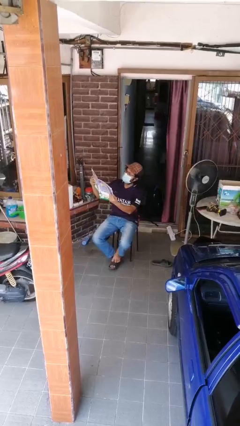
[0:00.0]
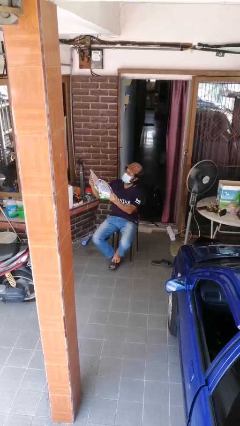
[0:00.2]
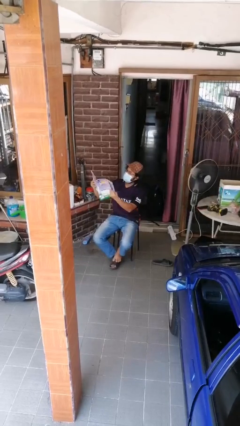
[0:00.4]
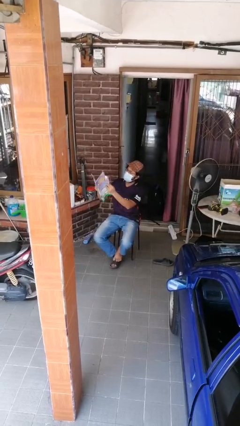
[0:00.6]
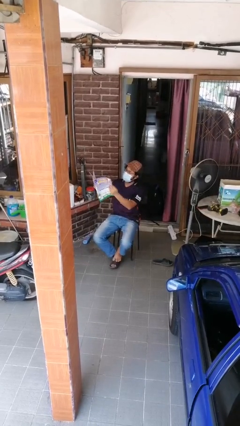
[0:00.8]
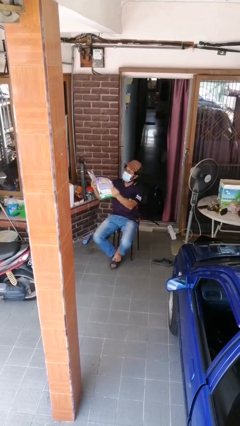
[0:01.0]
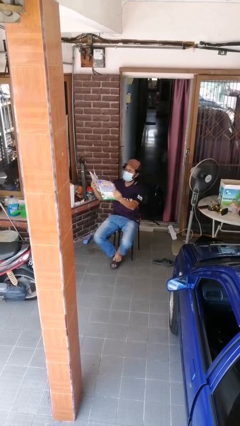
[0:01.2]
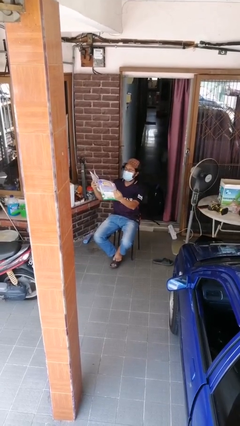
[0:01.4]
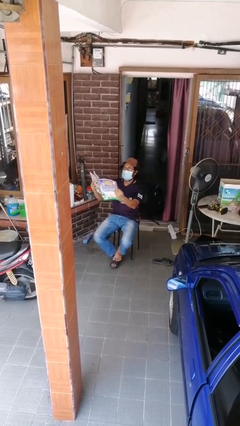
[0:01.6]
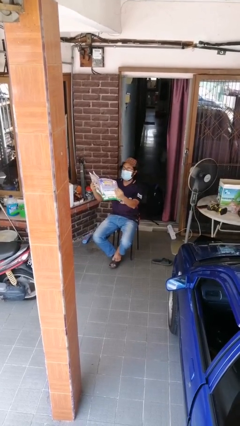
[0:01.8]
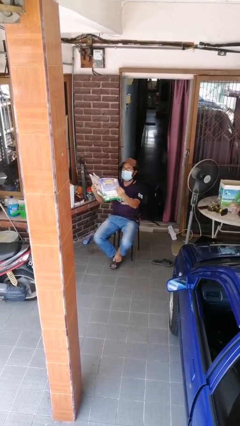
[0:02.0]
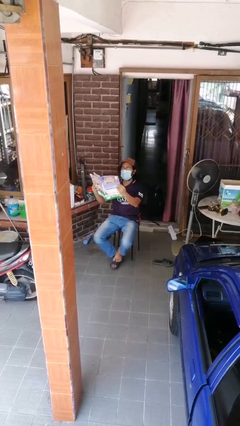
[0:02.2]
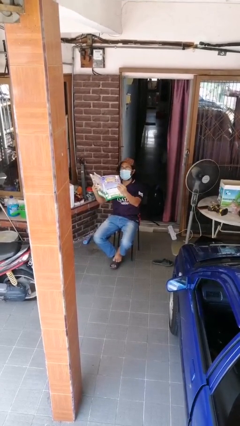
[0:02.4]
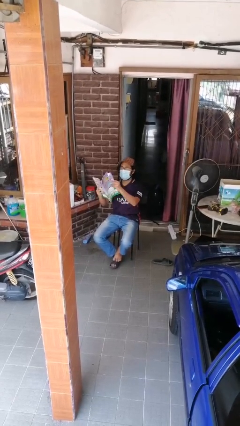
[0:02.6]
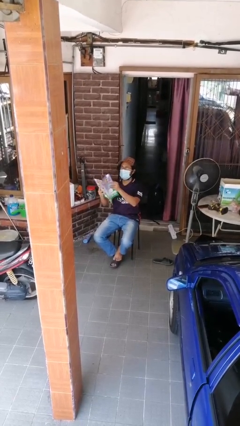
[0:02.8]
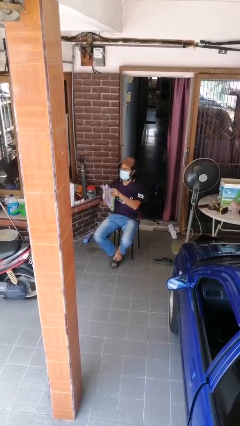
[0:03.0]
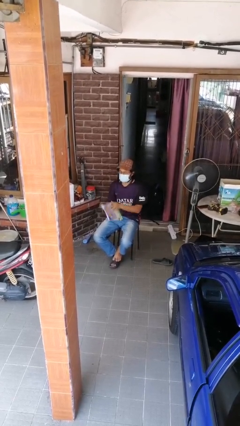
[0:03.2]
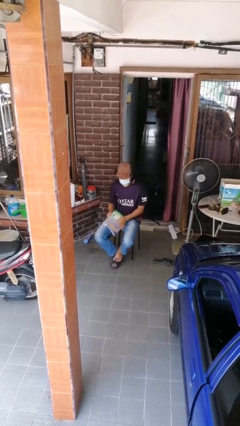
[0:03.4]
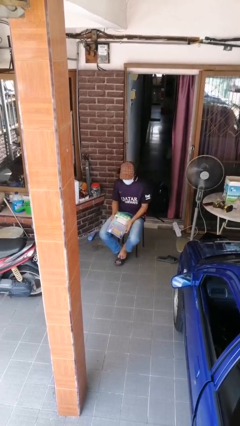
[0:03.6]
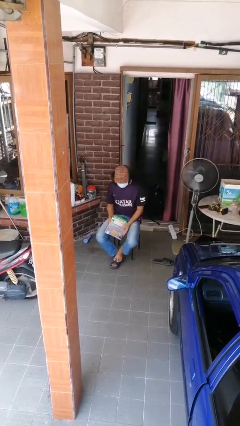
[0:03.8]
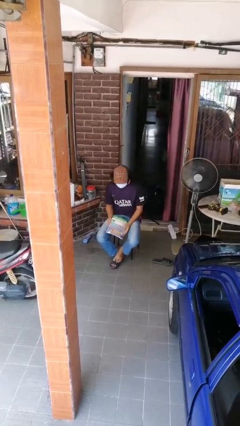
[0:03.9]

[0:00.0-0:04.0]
person reads document

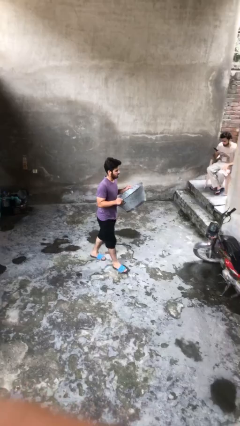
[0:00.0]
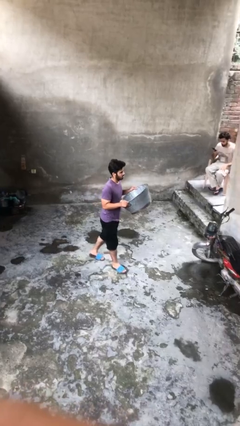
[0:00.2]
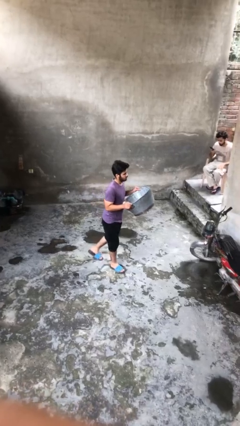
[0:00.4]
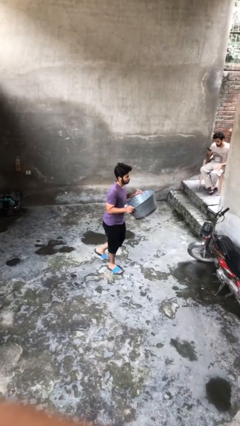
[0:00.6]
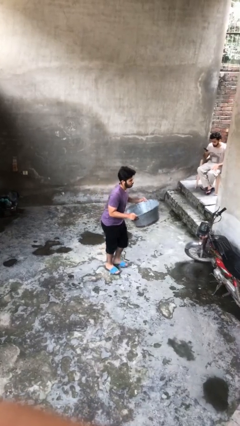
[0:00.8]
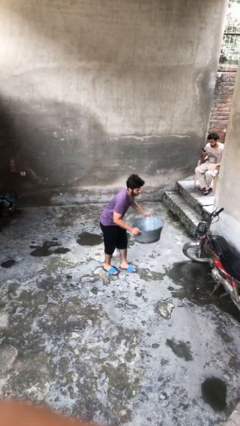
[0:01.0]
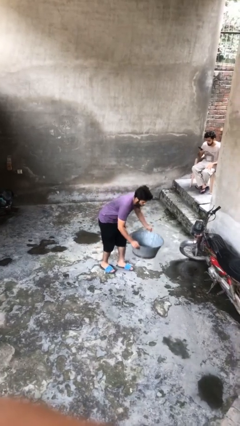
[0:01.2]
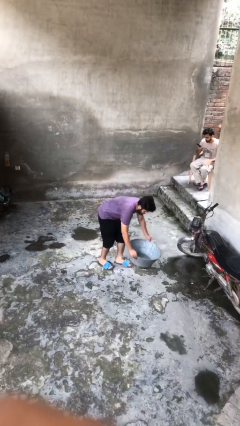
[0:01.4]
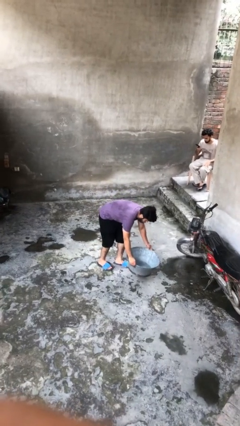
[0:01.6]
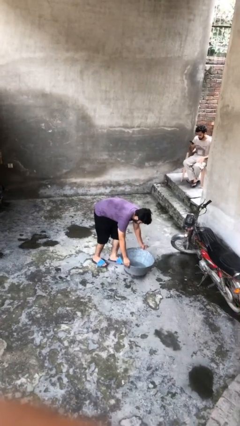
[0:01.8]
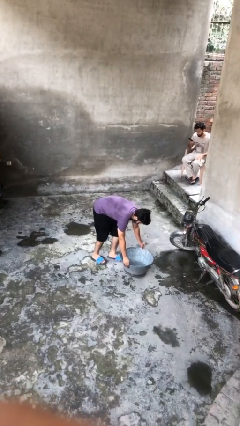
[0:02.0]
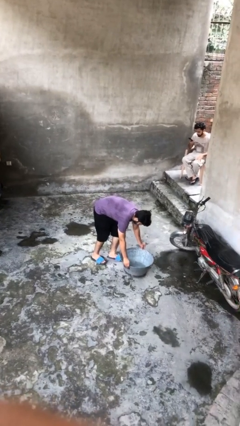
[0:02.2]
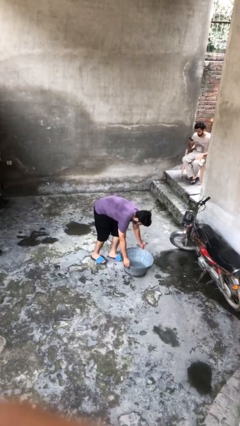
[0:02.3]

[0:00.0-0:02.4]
person puts down object on floor

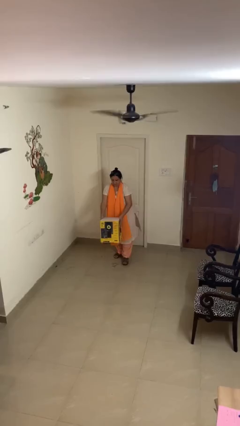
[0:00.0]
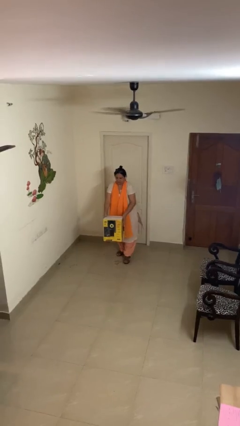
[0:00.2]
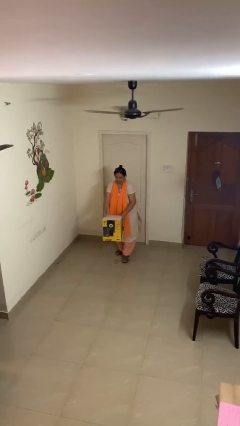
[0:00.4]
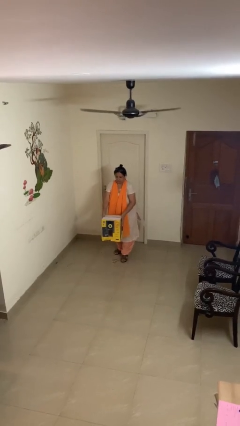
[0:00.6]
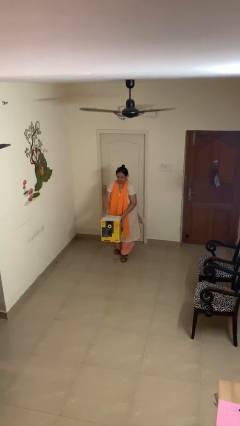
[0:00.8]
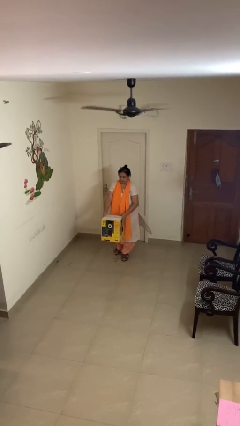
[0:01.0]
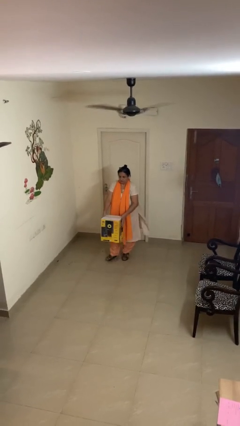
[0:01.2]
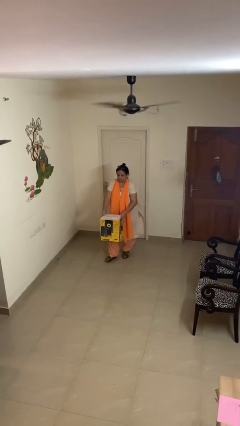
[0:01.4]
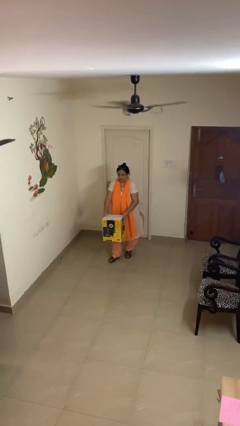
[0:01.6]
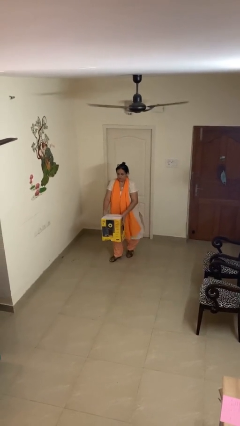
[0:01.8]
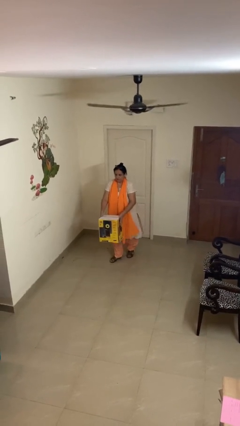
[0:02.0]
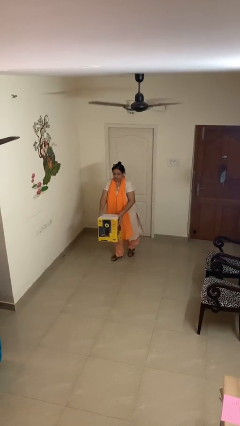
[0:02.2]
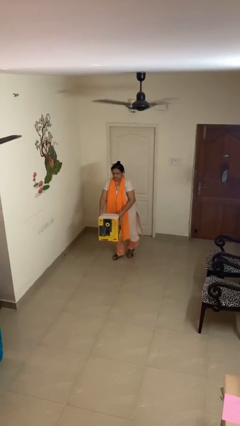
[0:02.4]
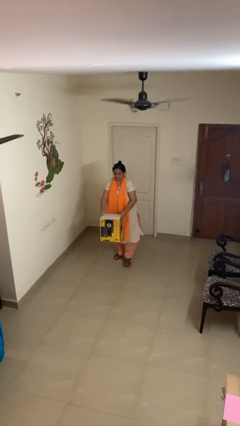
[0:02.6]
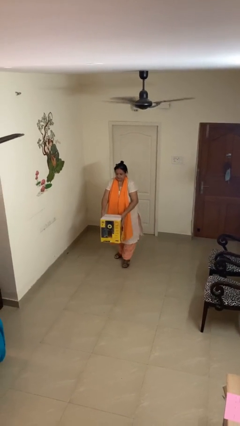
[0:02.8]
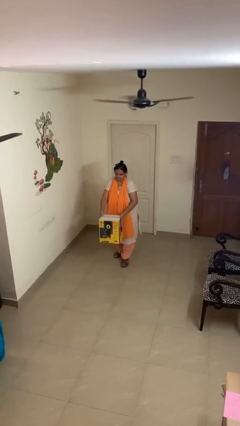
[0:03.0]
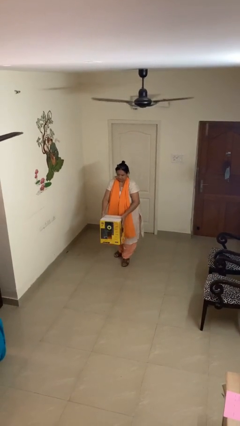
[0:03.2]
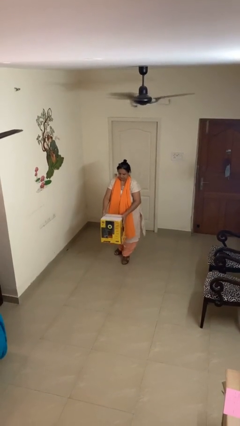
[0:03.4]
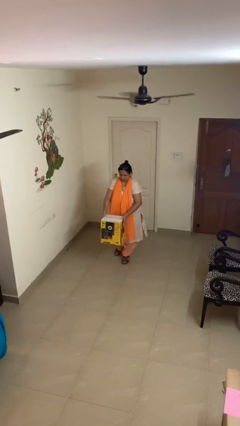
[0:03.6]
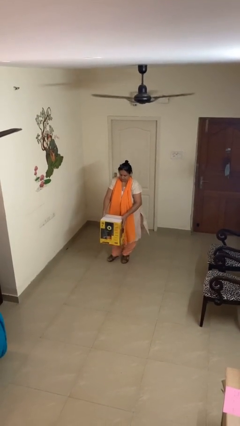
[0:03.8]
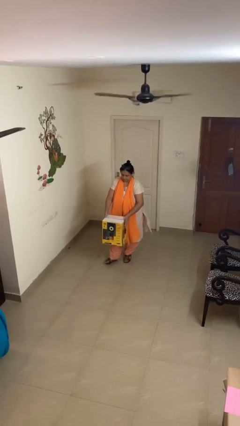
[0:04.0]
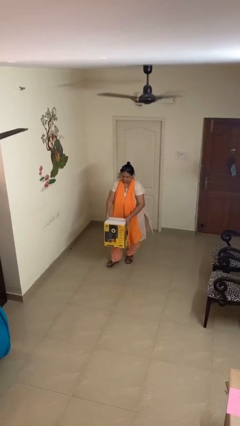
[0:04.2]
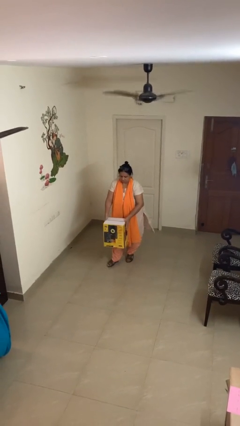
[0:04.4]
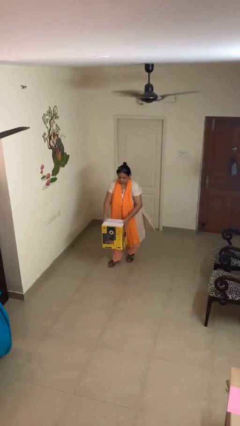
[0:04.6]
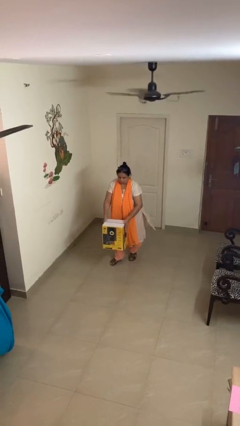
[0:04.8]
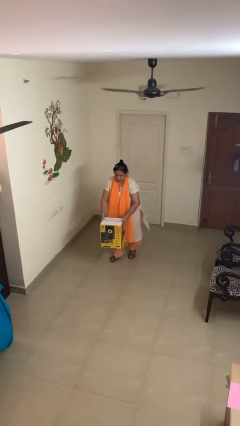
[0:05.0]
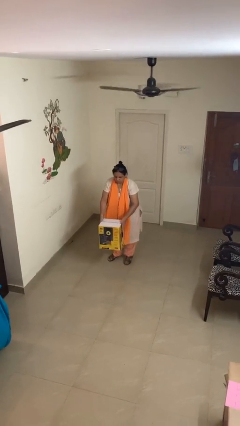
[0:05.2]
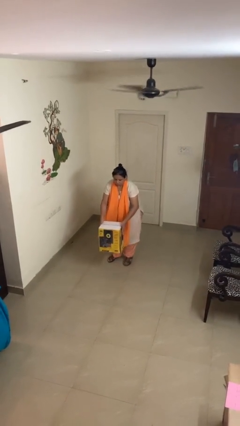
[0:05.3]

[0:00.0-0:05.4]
person carries heavy object

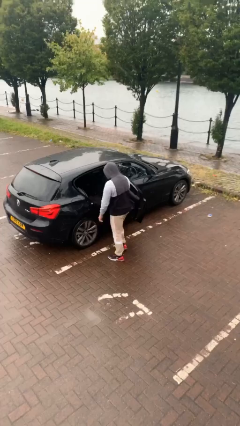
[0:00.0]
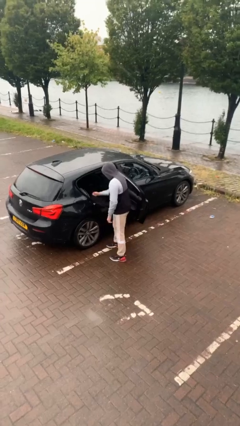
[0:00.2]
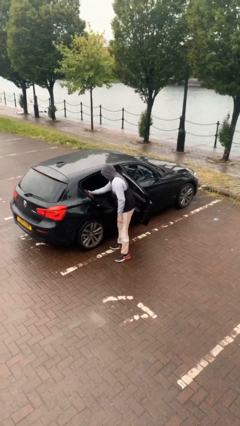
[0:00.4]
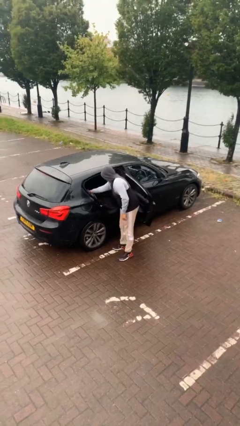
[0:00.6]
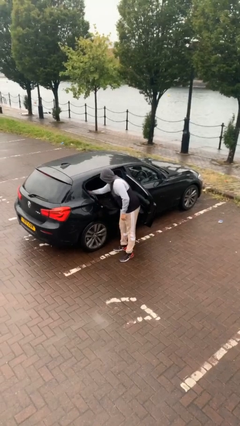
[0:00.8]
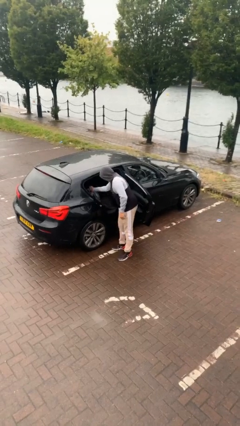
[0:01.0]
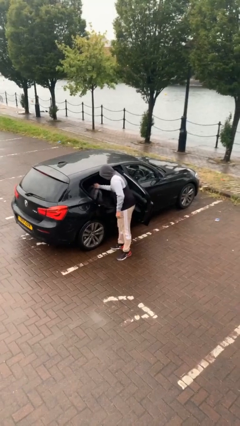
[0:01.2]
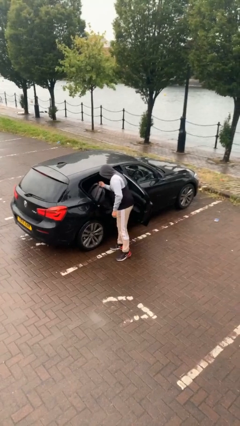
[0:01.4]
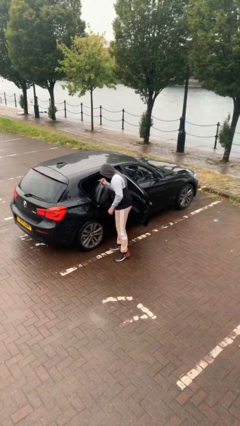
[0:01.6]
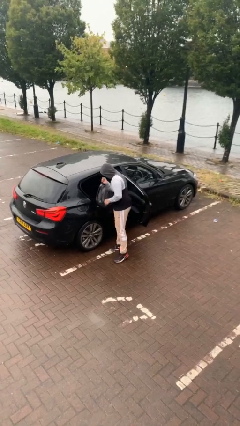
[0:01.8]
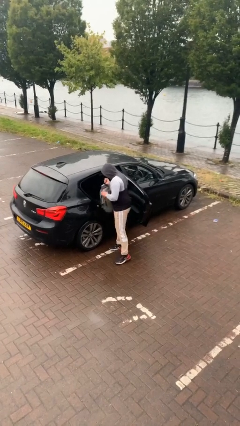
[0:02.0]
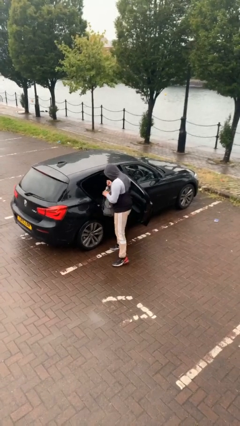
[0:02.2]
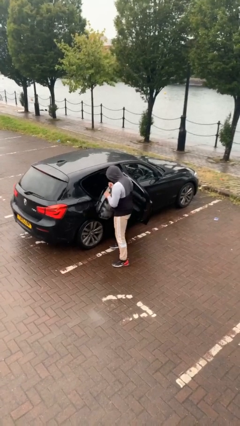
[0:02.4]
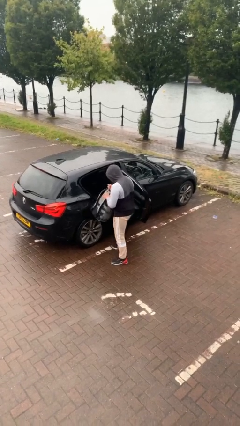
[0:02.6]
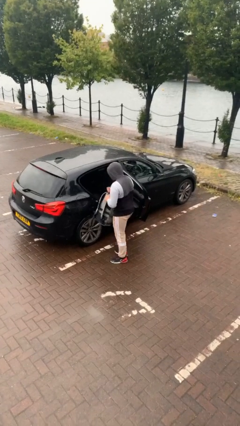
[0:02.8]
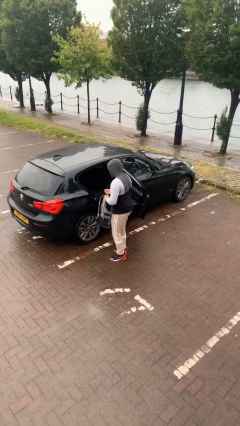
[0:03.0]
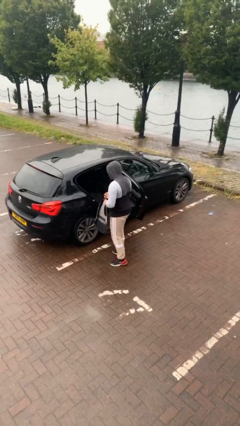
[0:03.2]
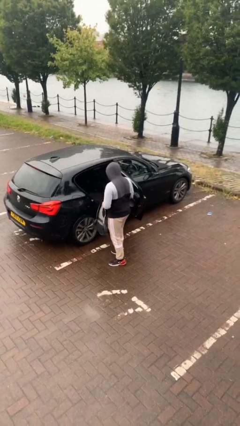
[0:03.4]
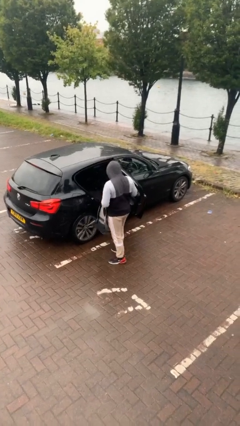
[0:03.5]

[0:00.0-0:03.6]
person unloads car

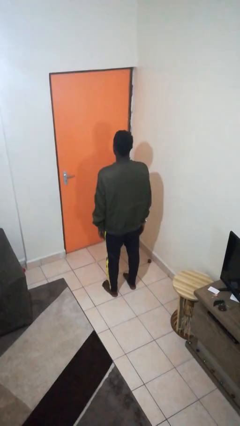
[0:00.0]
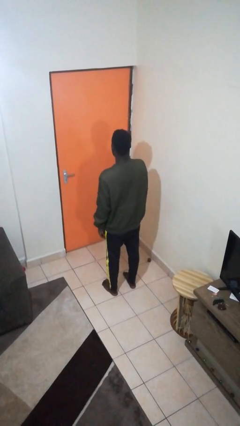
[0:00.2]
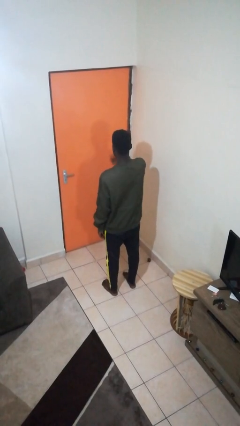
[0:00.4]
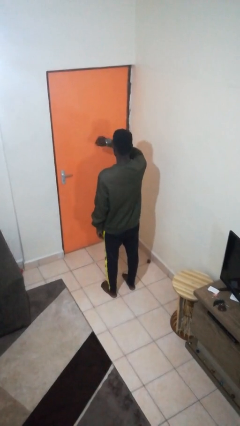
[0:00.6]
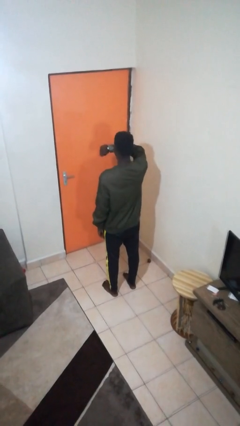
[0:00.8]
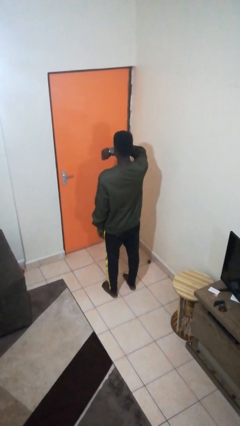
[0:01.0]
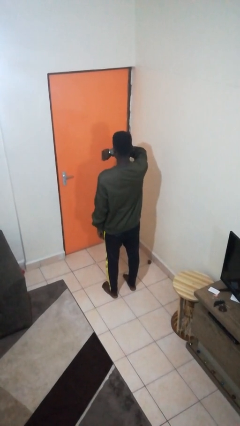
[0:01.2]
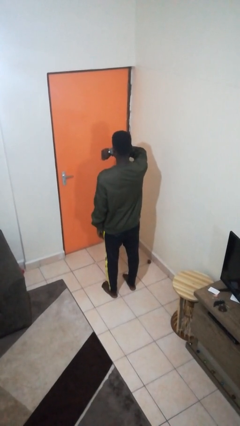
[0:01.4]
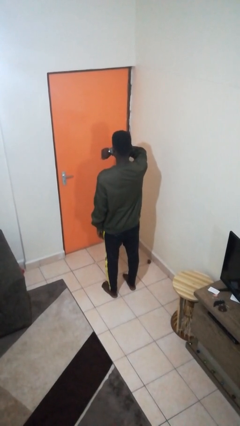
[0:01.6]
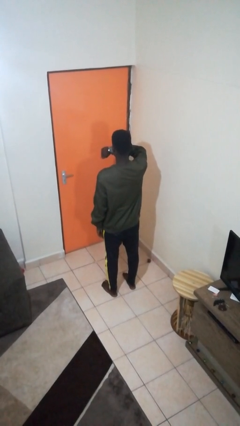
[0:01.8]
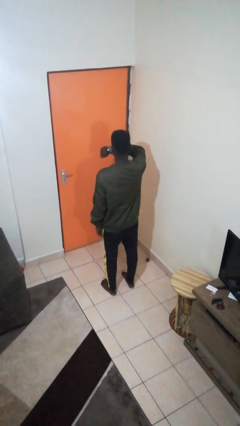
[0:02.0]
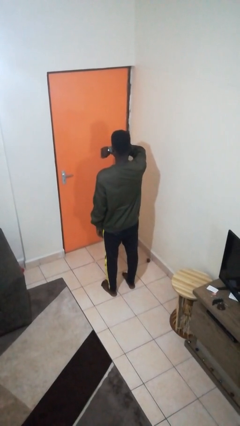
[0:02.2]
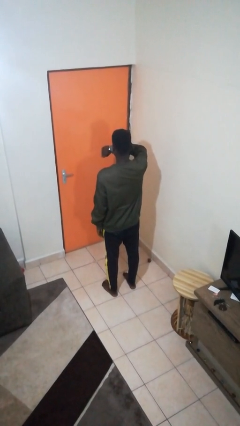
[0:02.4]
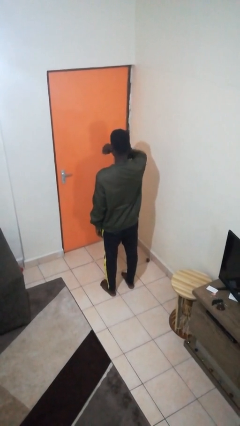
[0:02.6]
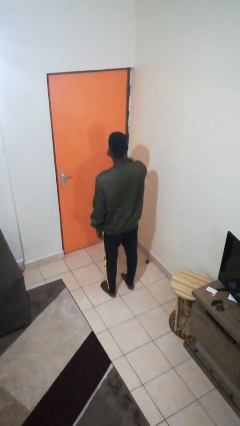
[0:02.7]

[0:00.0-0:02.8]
person looks at wristwatch
